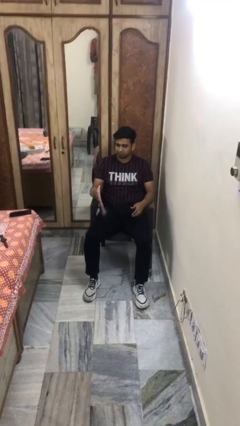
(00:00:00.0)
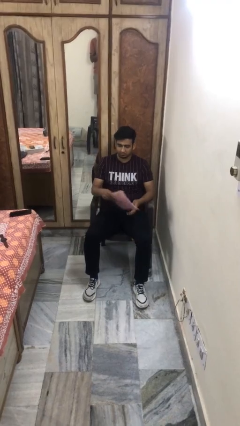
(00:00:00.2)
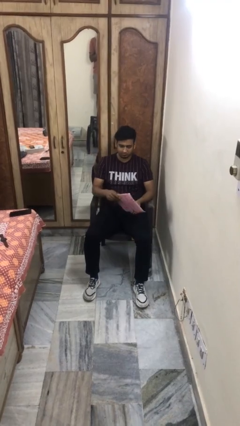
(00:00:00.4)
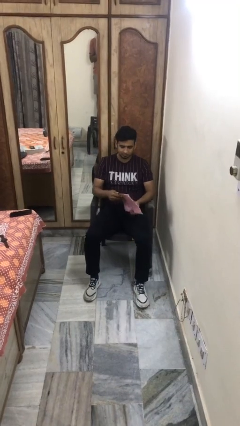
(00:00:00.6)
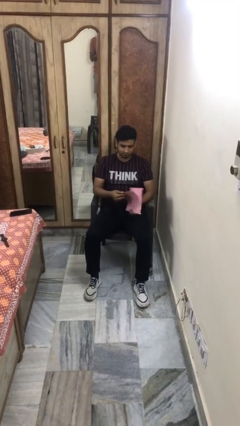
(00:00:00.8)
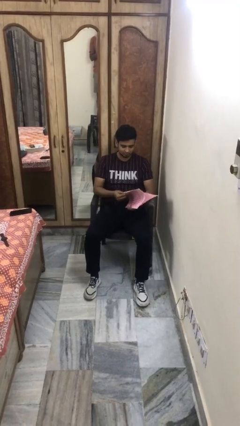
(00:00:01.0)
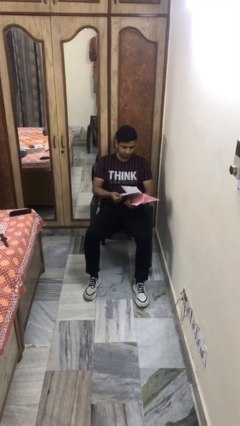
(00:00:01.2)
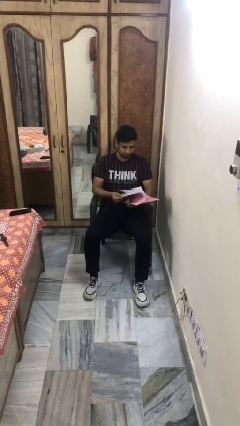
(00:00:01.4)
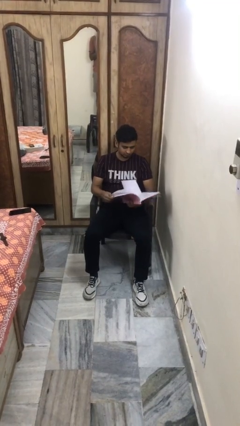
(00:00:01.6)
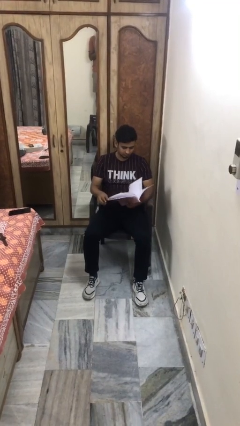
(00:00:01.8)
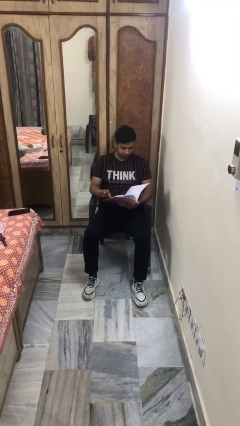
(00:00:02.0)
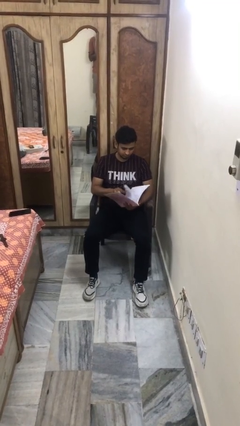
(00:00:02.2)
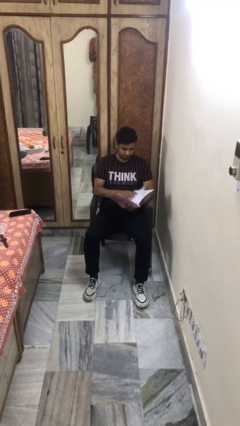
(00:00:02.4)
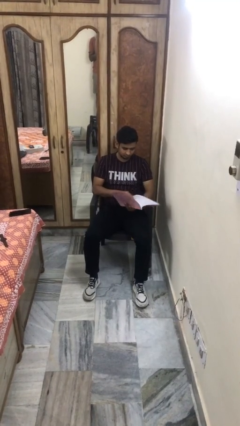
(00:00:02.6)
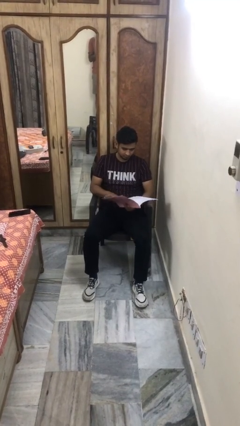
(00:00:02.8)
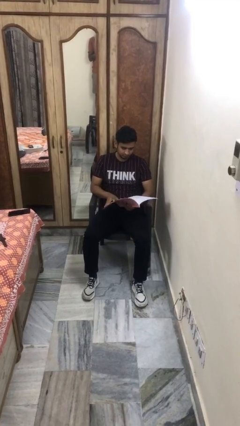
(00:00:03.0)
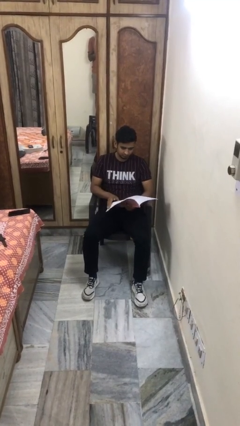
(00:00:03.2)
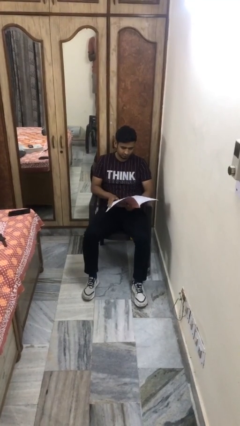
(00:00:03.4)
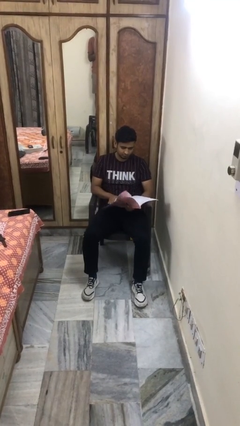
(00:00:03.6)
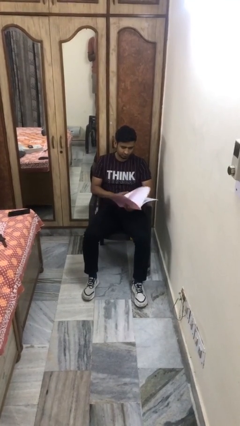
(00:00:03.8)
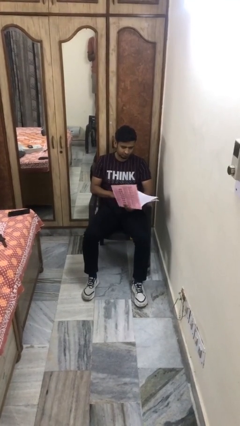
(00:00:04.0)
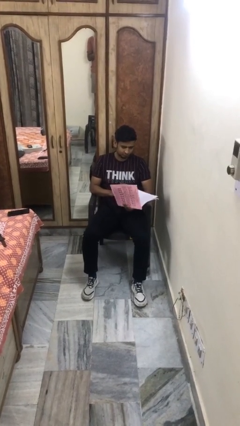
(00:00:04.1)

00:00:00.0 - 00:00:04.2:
person reads magazine

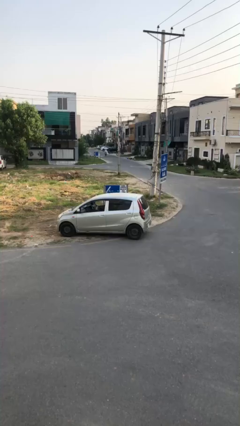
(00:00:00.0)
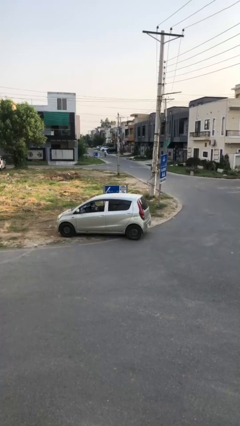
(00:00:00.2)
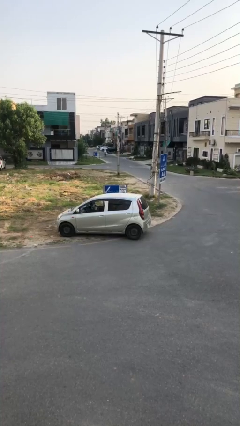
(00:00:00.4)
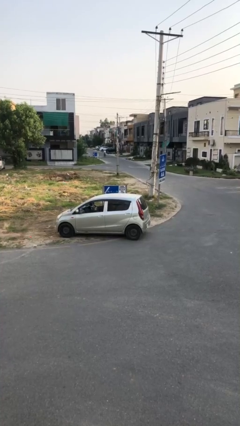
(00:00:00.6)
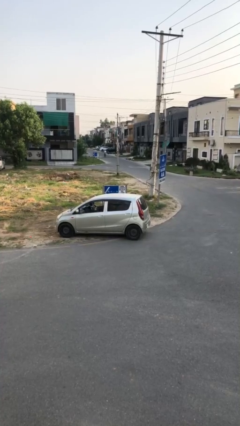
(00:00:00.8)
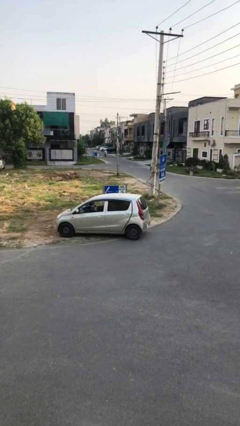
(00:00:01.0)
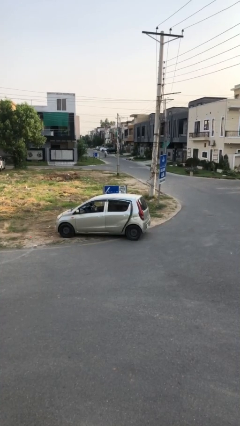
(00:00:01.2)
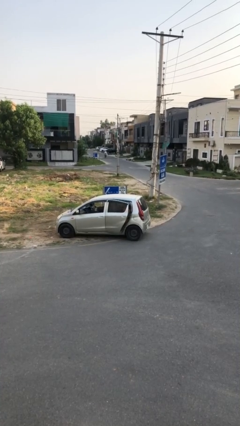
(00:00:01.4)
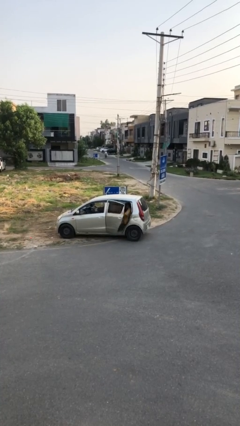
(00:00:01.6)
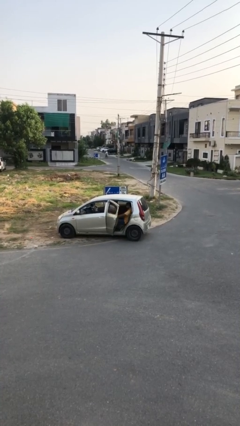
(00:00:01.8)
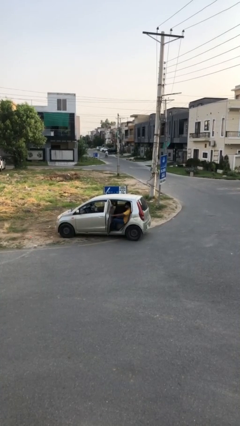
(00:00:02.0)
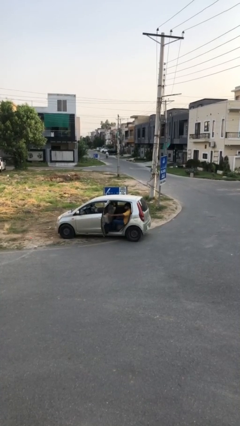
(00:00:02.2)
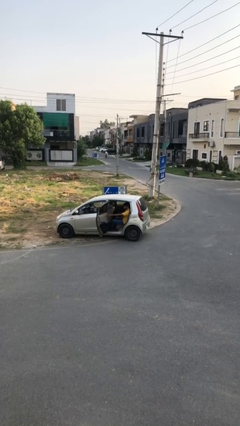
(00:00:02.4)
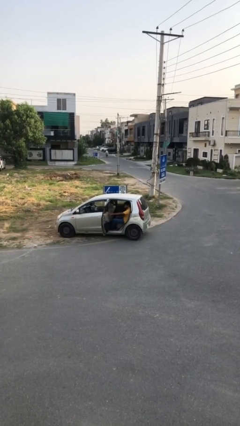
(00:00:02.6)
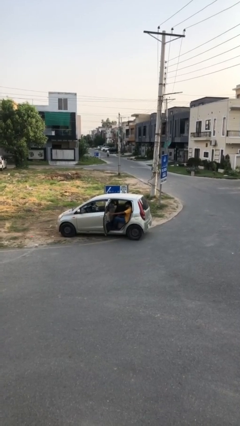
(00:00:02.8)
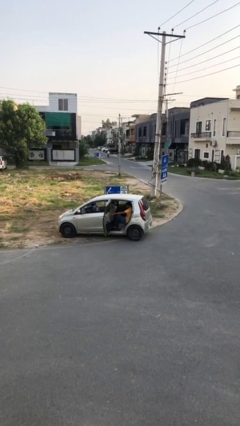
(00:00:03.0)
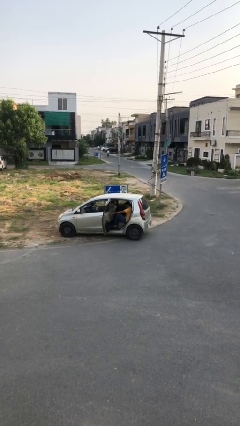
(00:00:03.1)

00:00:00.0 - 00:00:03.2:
person opens car door

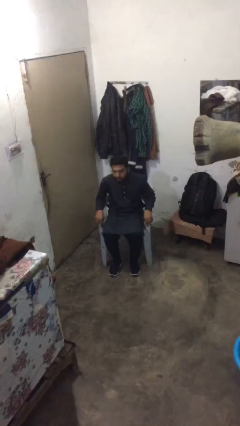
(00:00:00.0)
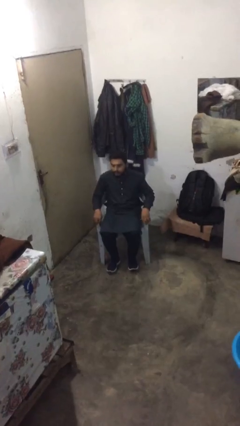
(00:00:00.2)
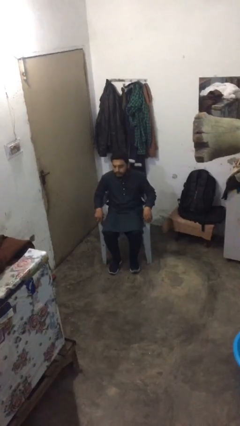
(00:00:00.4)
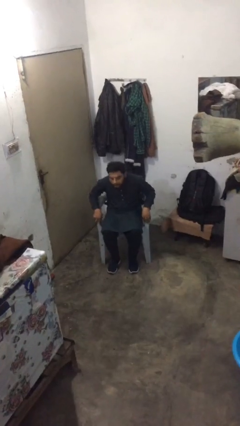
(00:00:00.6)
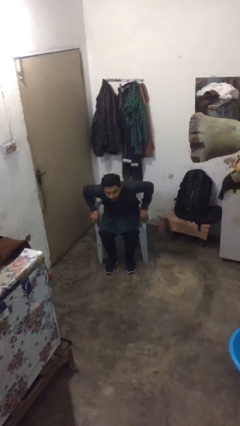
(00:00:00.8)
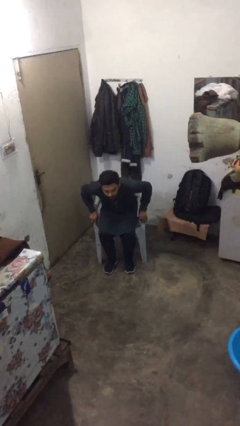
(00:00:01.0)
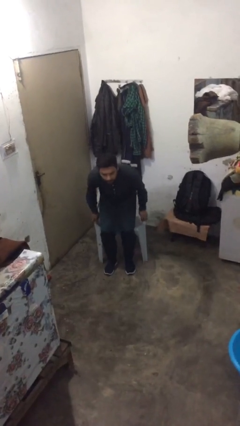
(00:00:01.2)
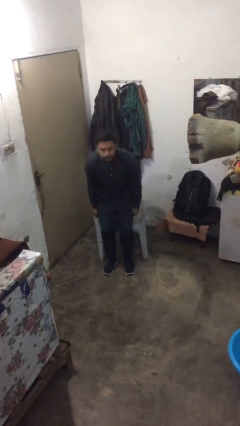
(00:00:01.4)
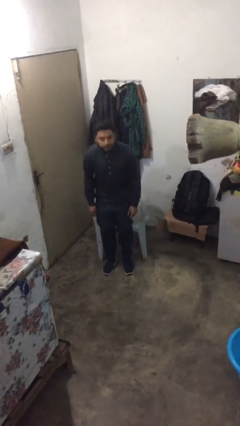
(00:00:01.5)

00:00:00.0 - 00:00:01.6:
person stands up

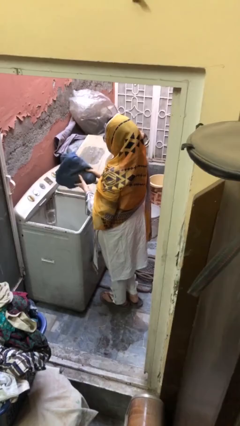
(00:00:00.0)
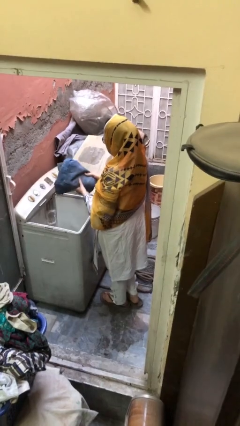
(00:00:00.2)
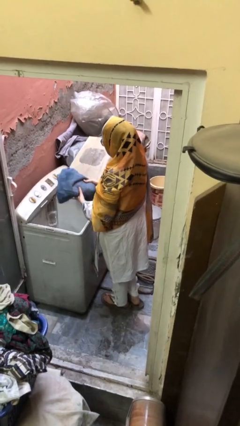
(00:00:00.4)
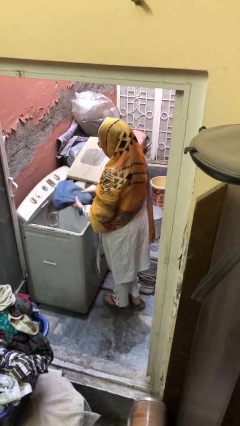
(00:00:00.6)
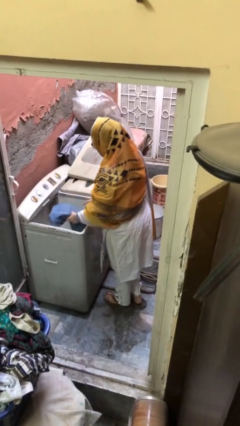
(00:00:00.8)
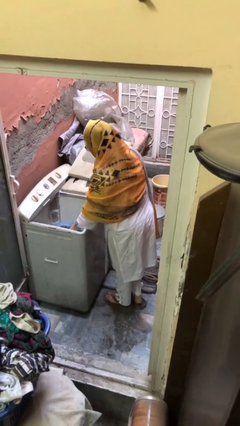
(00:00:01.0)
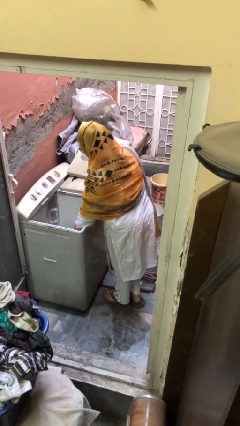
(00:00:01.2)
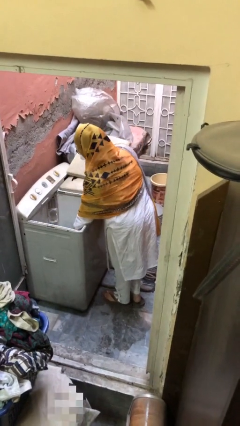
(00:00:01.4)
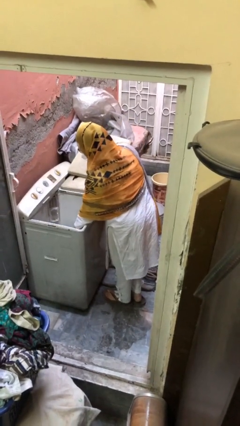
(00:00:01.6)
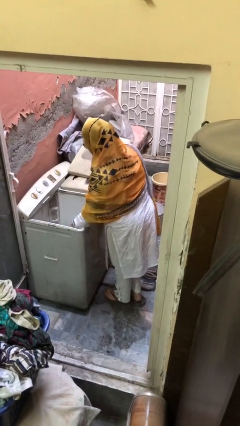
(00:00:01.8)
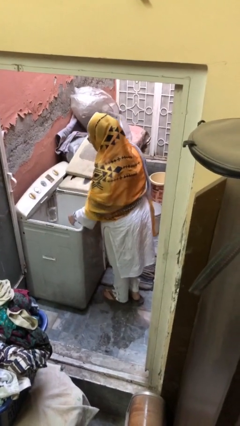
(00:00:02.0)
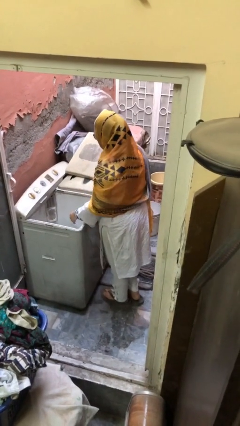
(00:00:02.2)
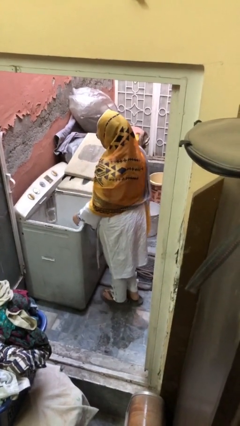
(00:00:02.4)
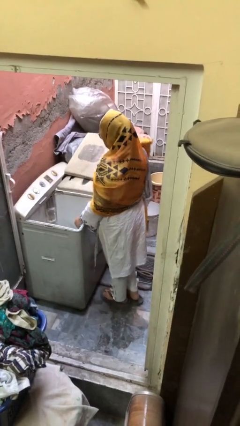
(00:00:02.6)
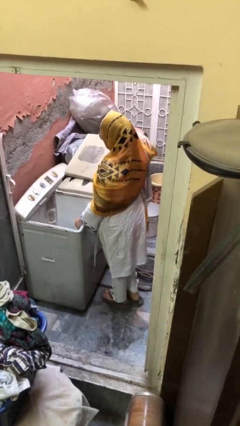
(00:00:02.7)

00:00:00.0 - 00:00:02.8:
person loads clotheswasher

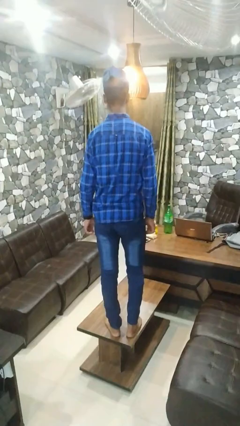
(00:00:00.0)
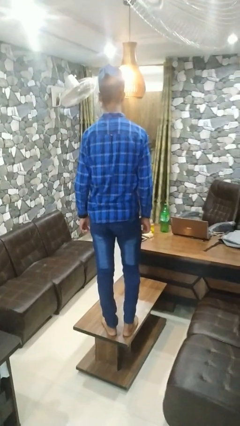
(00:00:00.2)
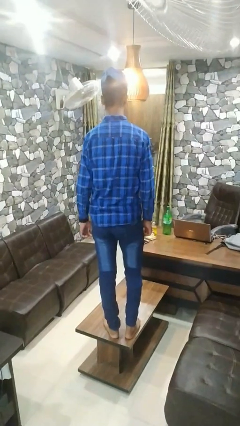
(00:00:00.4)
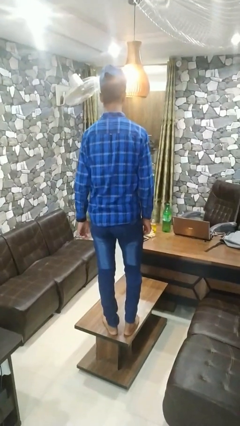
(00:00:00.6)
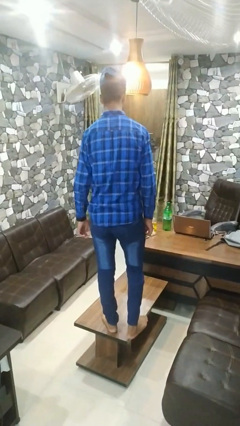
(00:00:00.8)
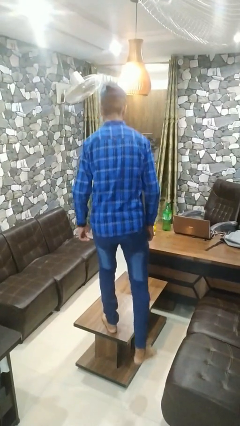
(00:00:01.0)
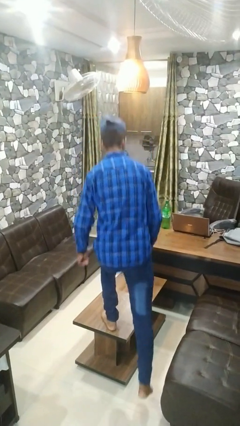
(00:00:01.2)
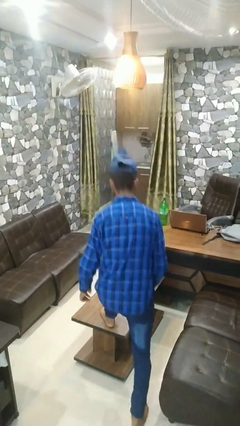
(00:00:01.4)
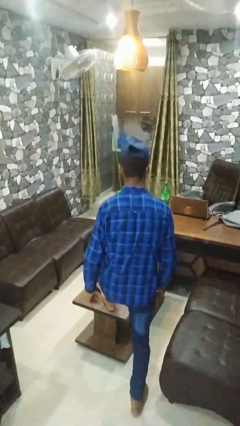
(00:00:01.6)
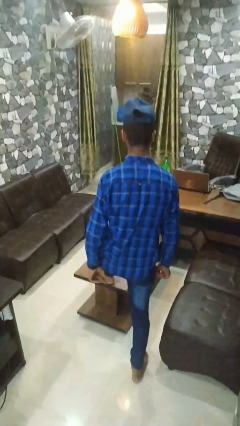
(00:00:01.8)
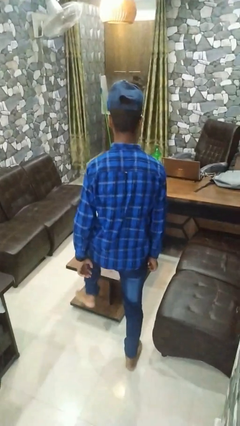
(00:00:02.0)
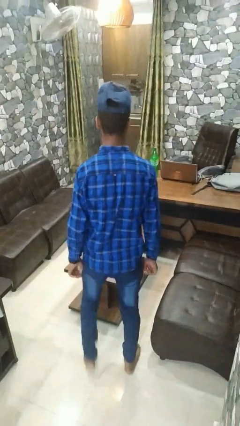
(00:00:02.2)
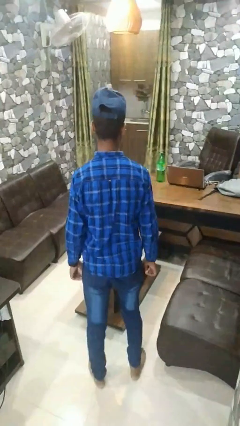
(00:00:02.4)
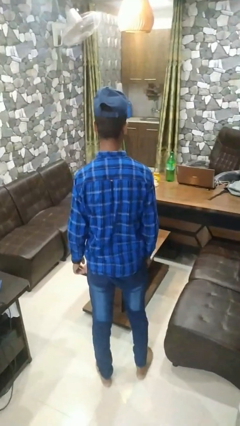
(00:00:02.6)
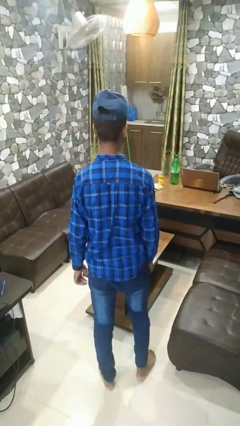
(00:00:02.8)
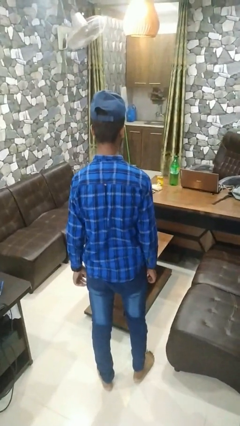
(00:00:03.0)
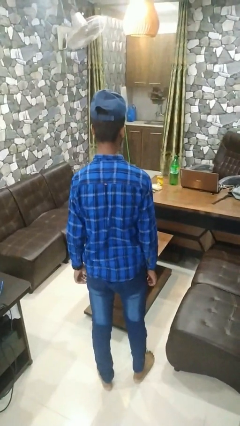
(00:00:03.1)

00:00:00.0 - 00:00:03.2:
person climbs off table

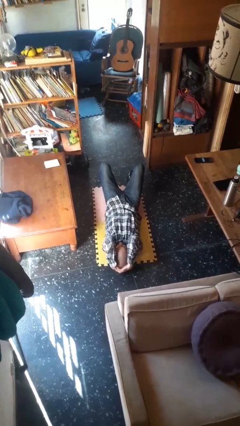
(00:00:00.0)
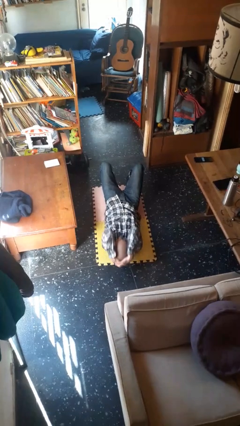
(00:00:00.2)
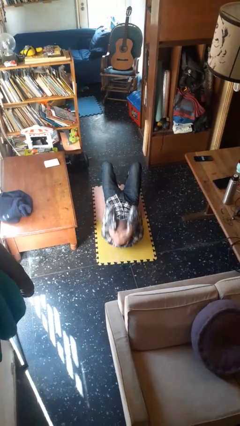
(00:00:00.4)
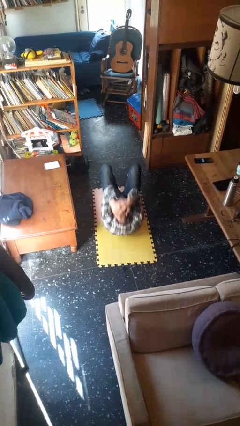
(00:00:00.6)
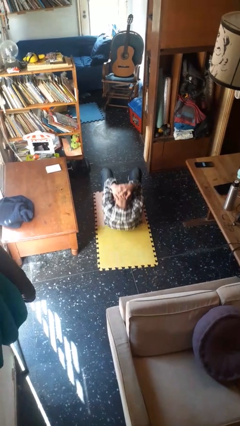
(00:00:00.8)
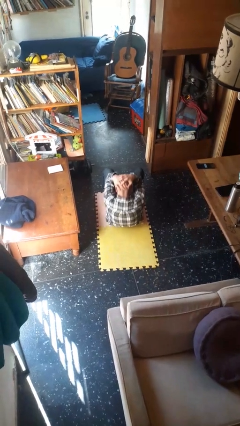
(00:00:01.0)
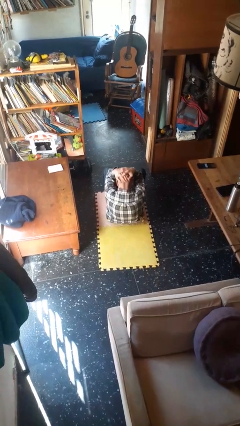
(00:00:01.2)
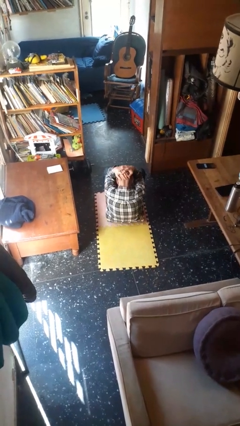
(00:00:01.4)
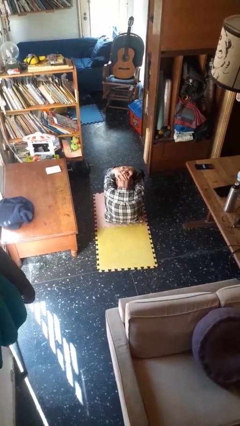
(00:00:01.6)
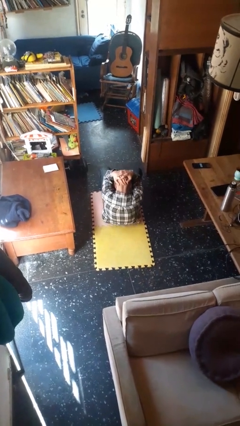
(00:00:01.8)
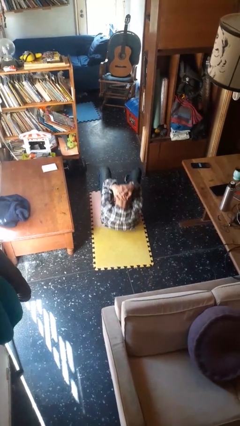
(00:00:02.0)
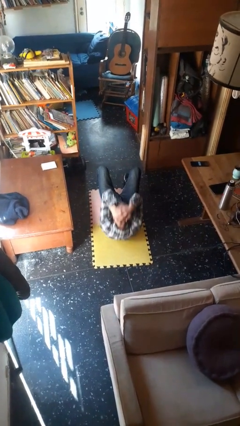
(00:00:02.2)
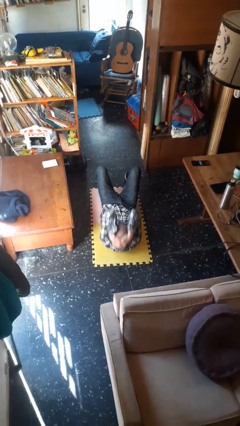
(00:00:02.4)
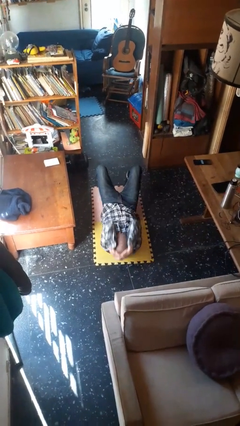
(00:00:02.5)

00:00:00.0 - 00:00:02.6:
person exercises with situp
